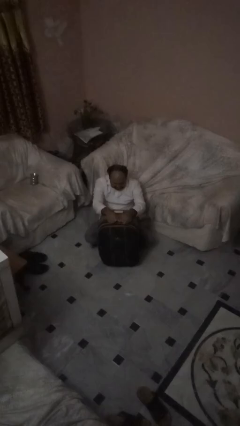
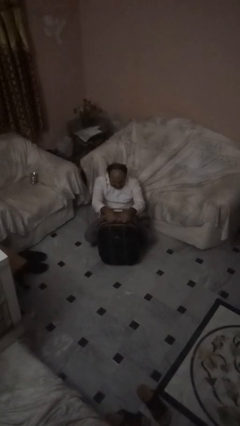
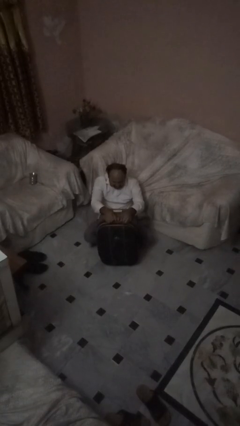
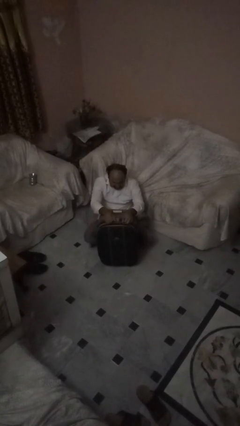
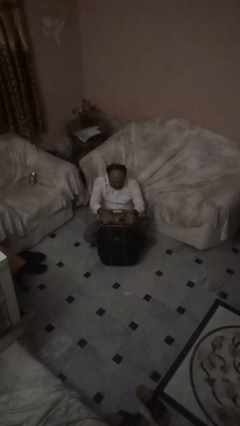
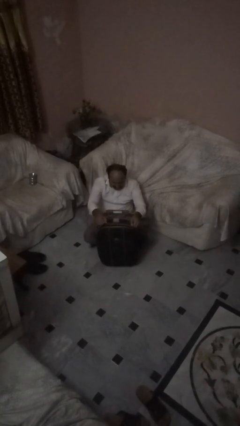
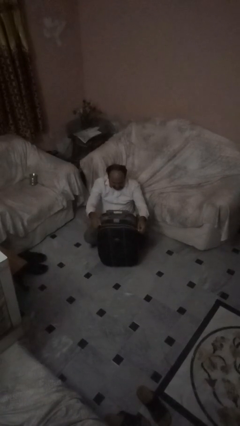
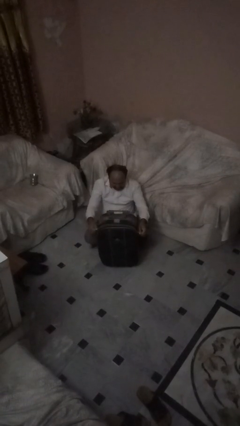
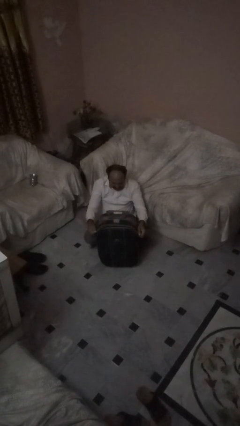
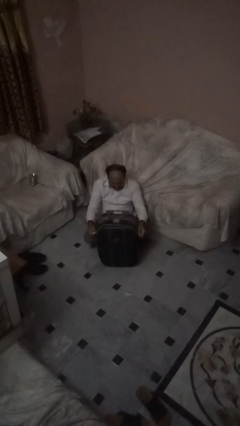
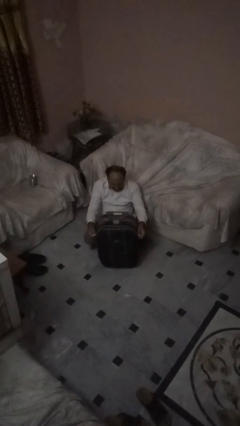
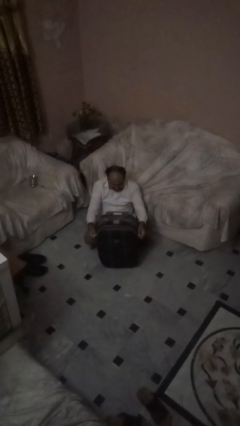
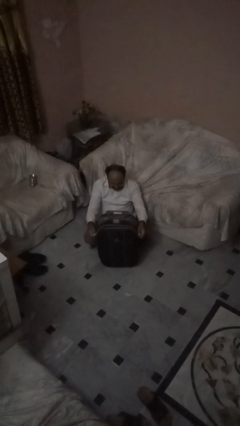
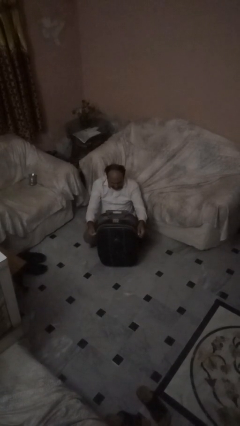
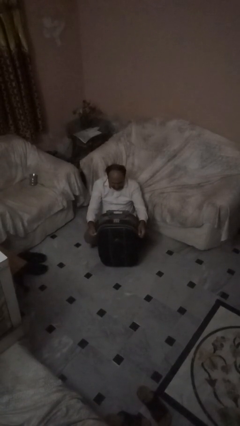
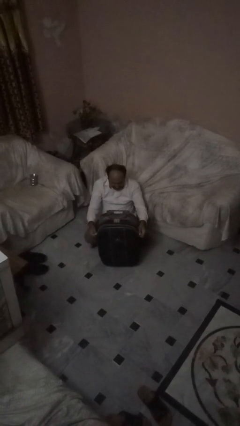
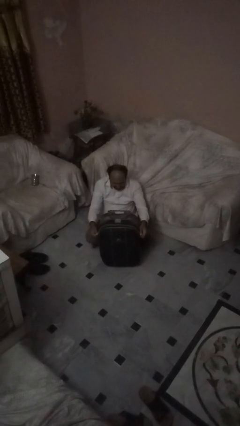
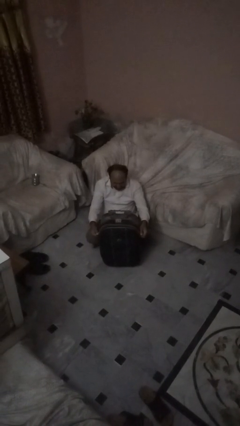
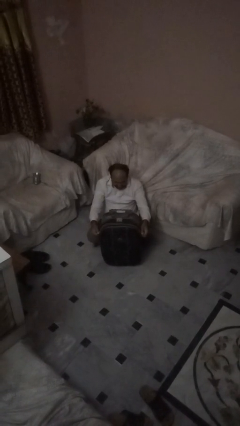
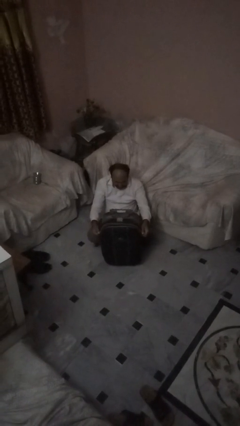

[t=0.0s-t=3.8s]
person opens suitcase

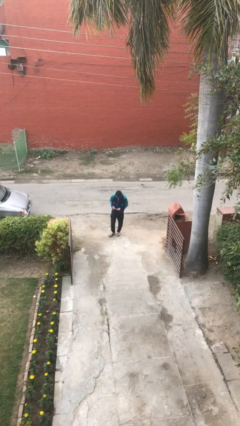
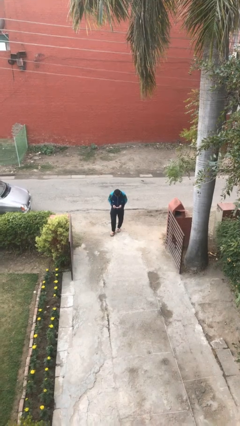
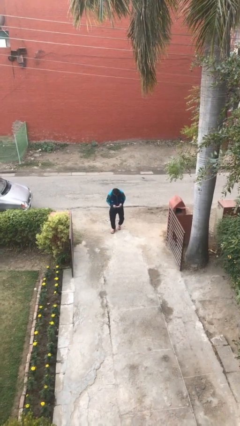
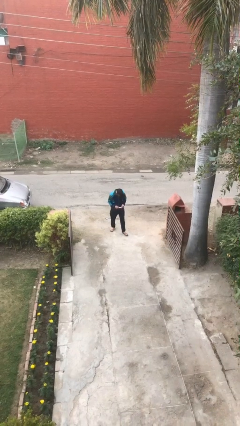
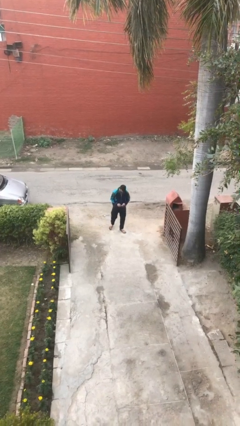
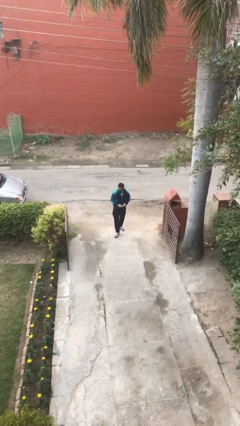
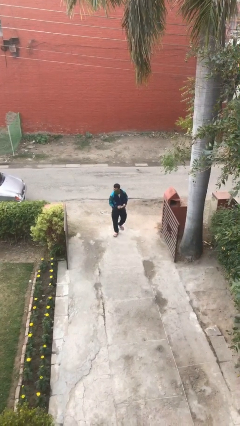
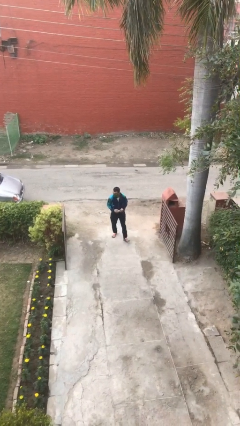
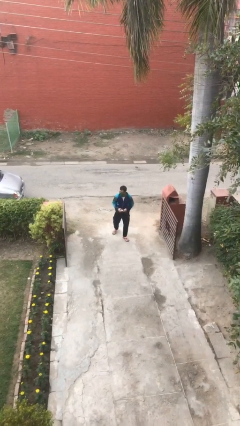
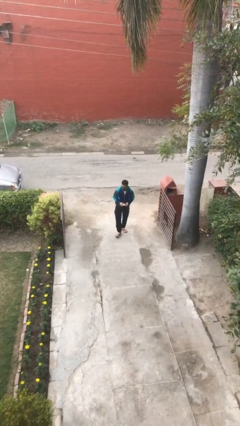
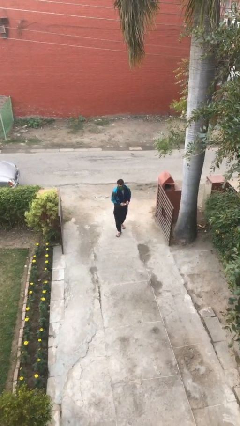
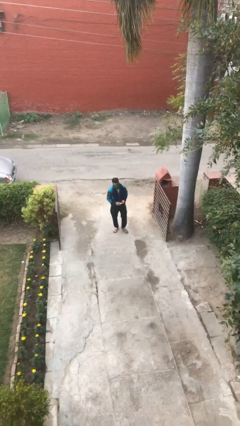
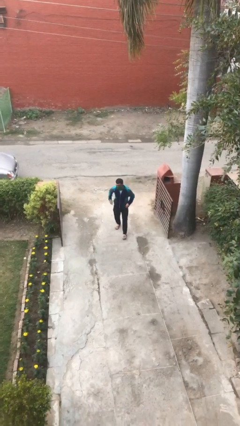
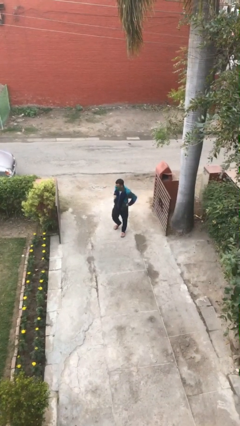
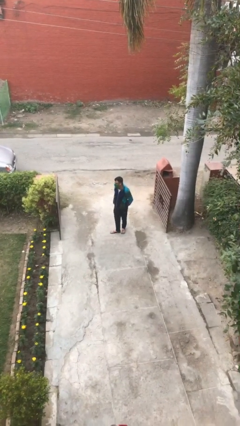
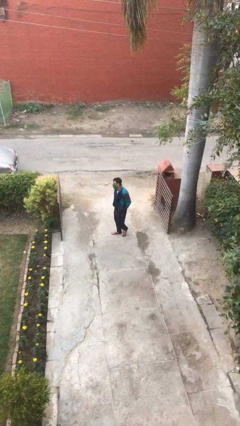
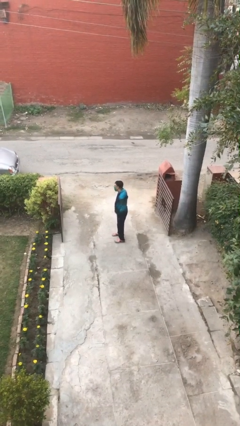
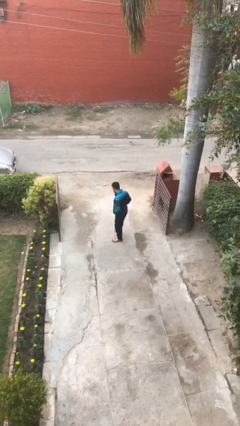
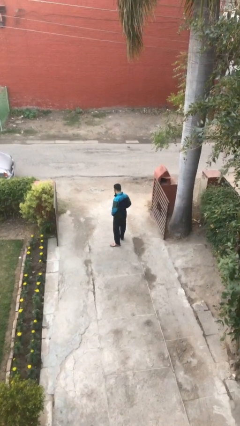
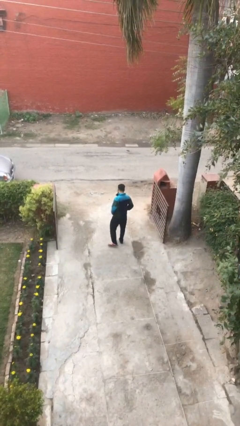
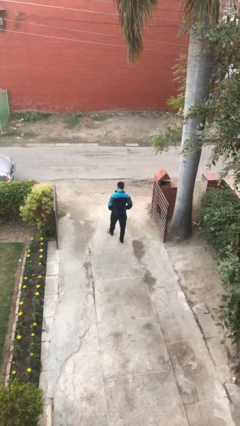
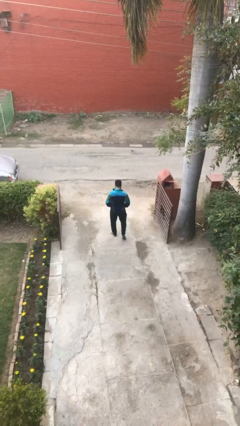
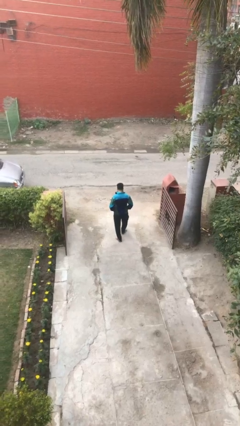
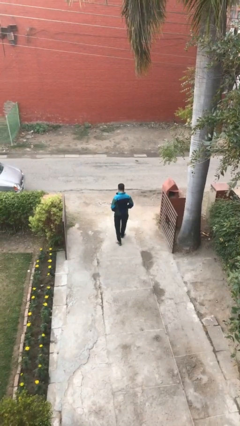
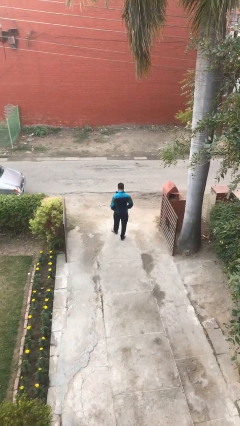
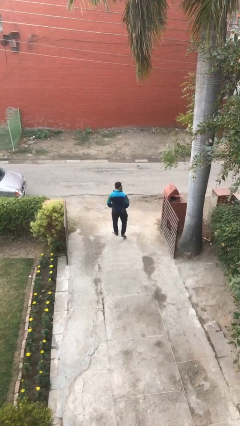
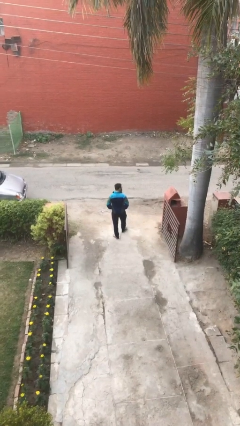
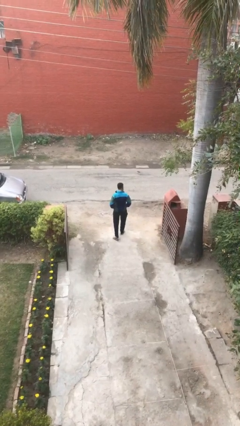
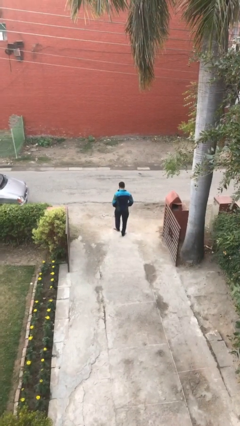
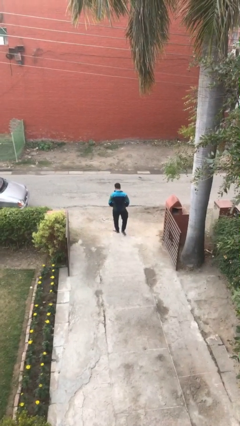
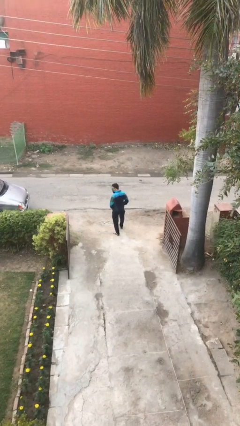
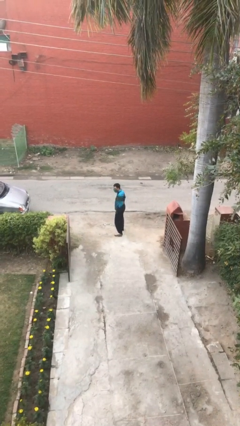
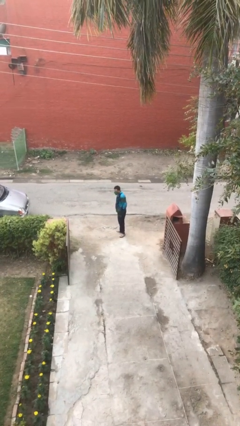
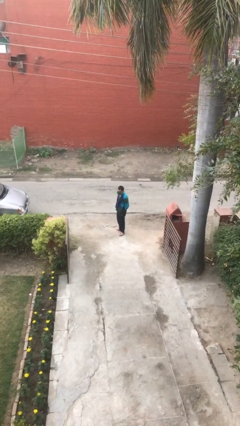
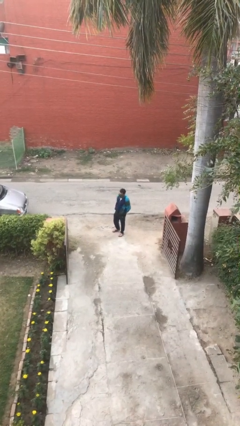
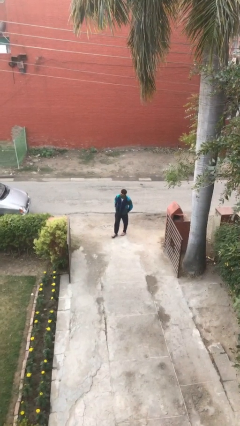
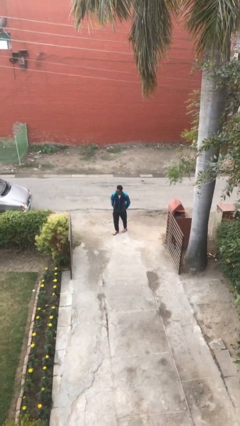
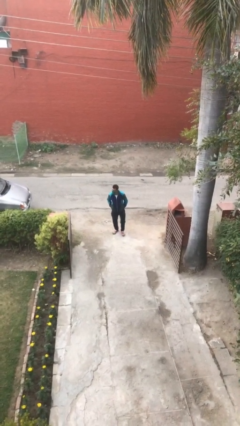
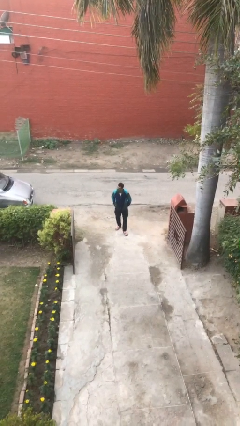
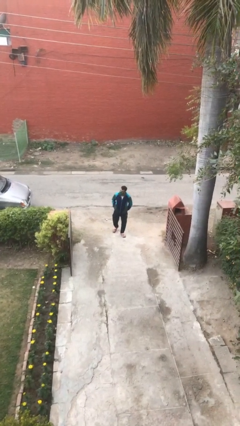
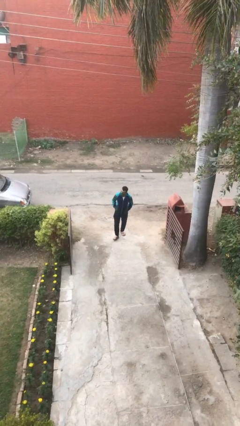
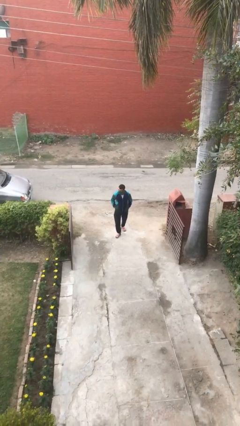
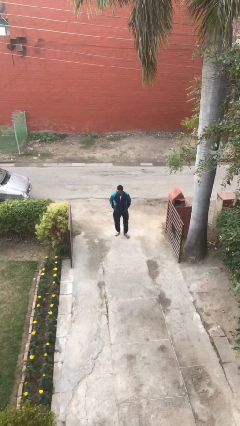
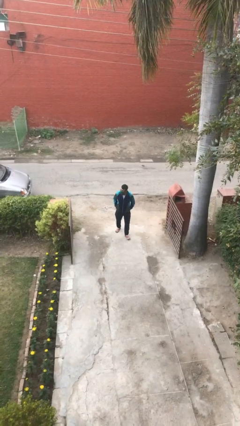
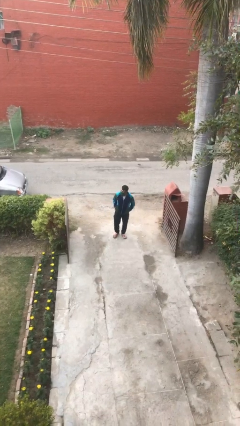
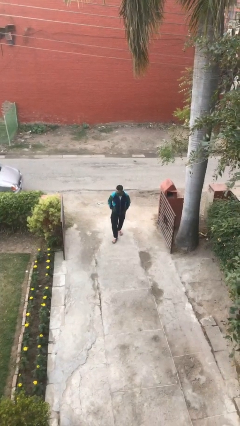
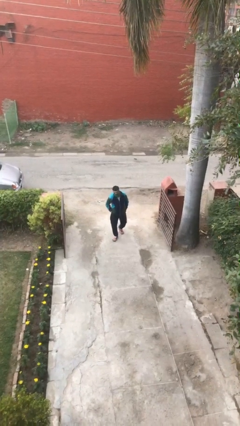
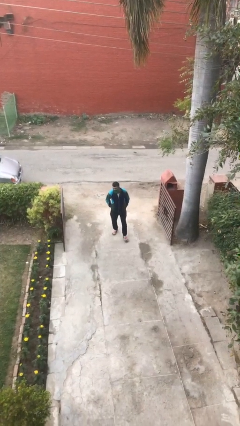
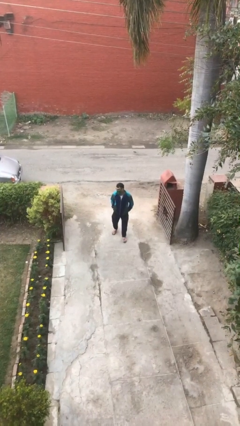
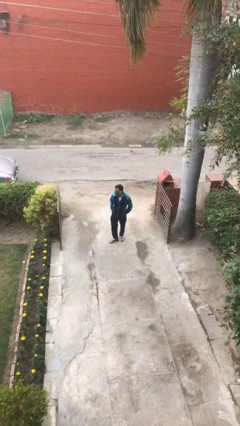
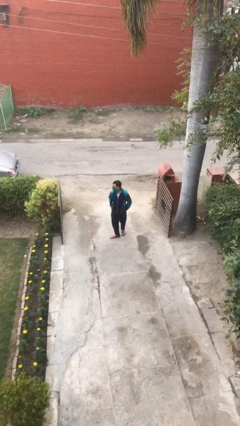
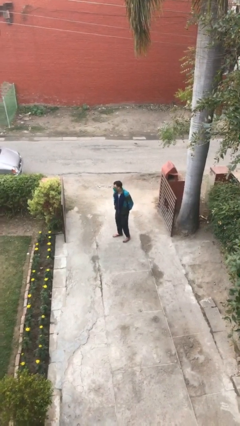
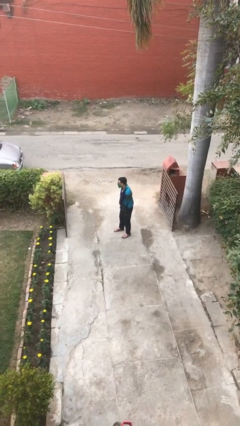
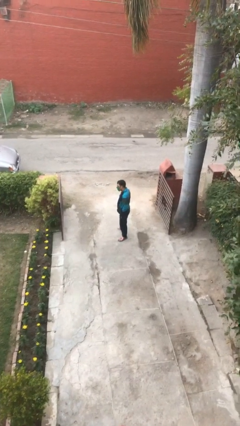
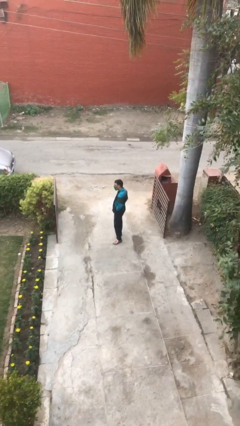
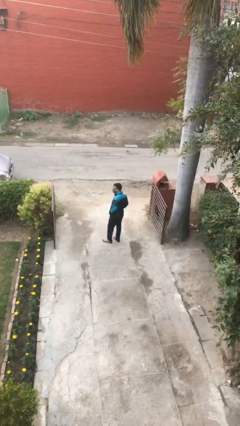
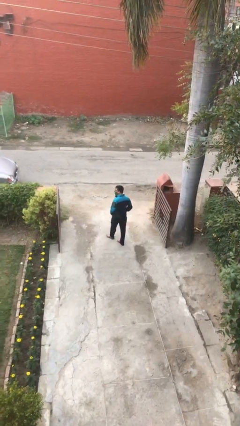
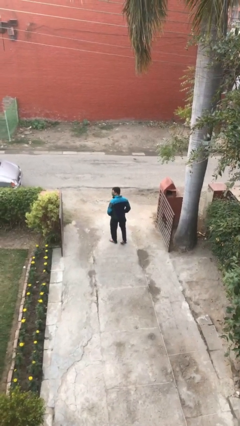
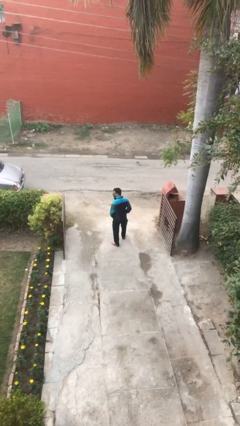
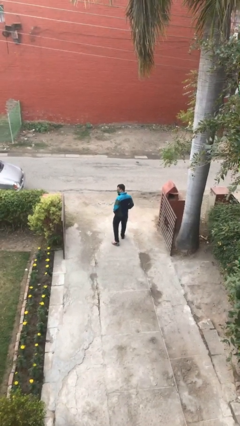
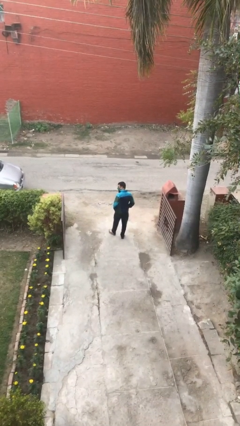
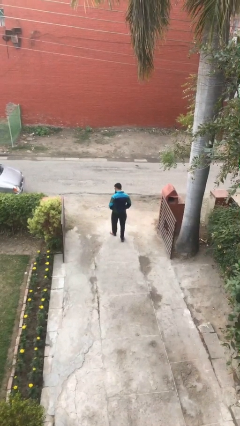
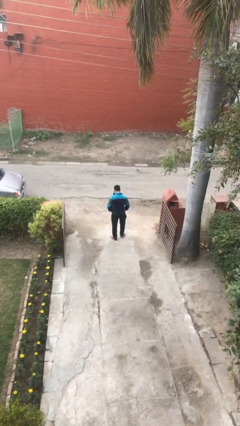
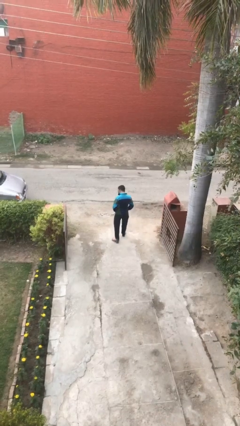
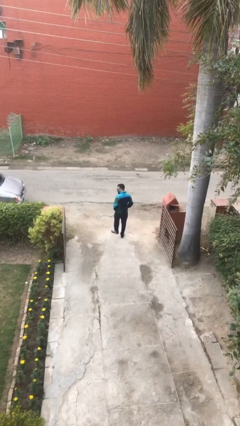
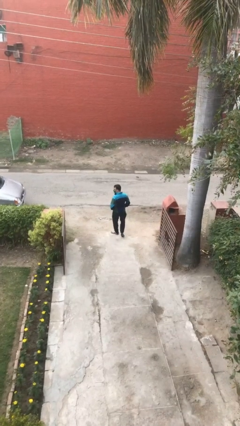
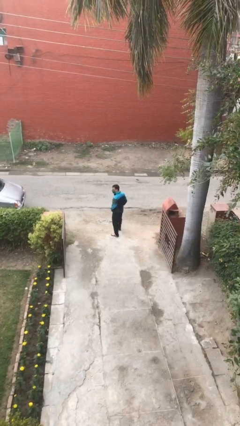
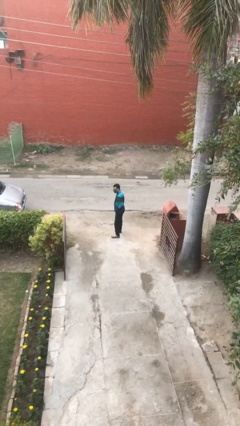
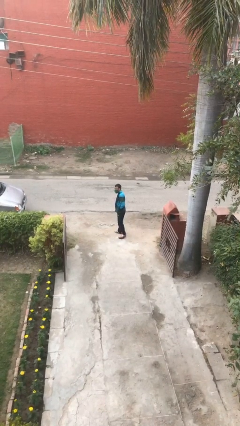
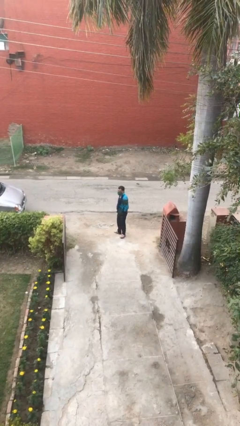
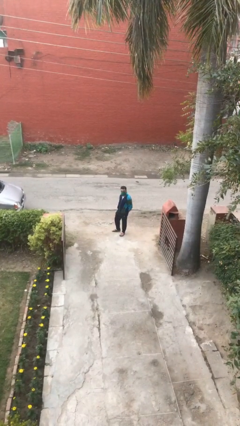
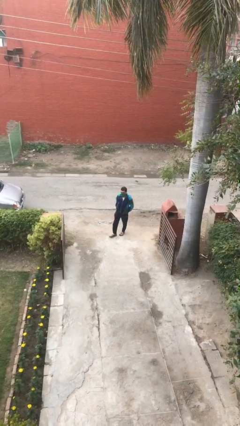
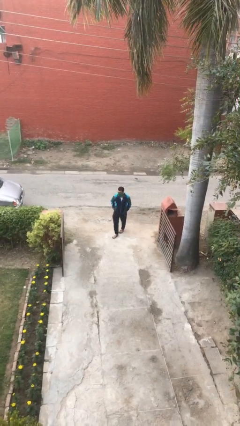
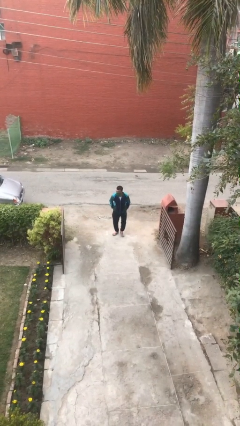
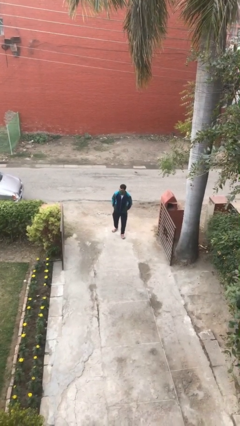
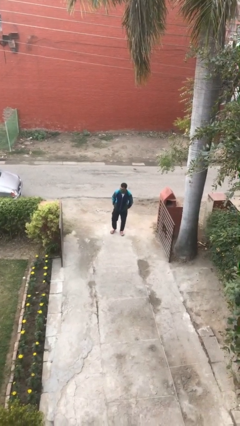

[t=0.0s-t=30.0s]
person walks
